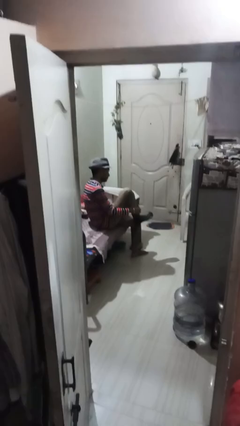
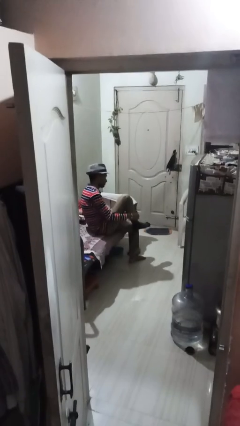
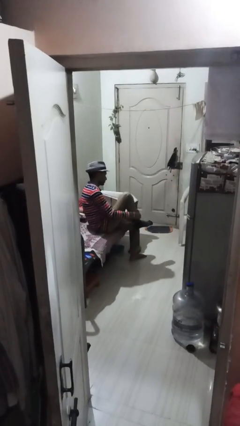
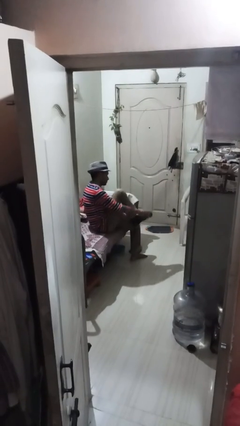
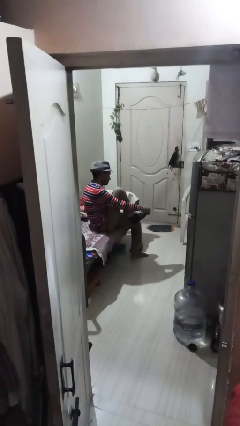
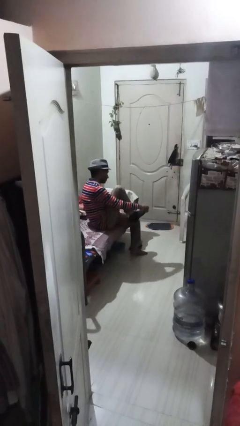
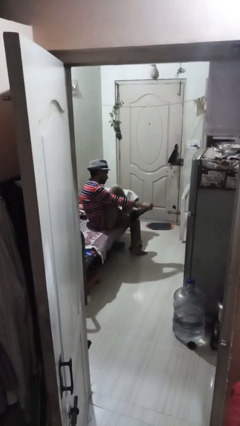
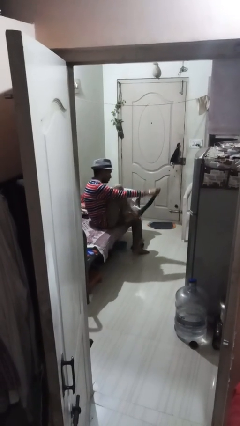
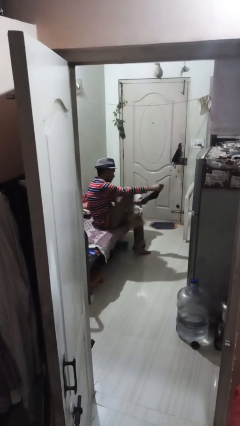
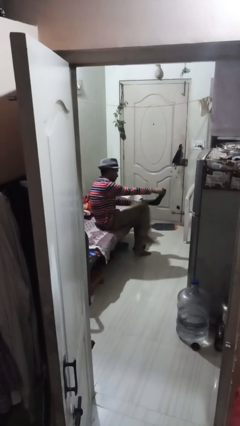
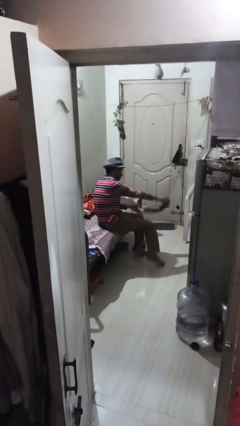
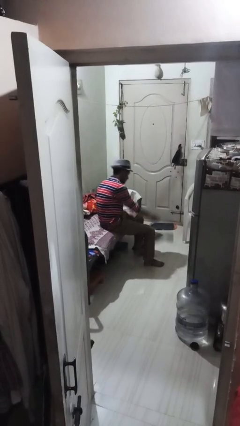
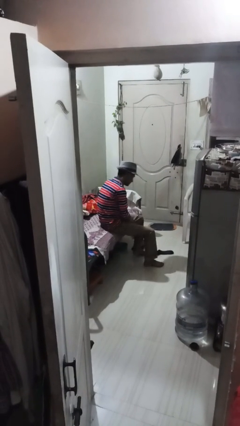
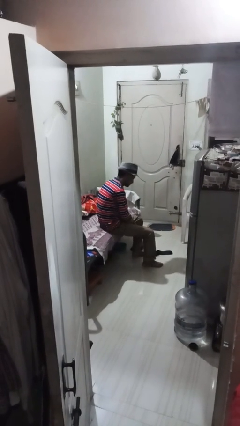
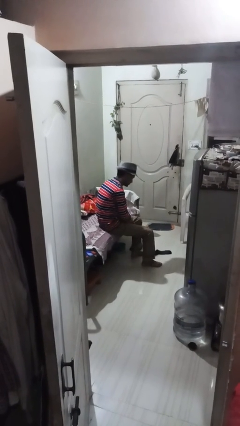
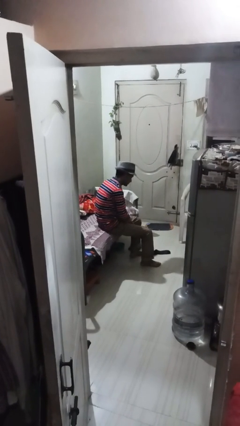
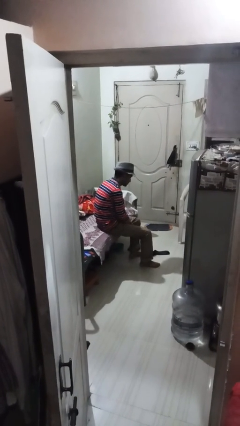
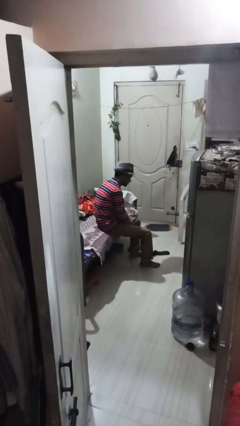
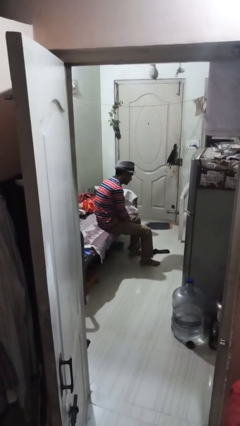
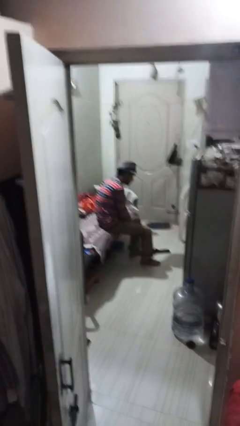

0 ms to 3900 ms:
person takes off socks

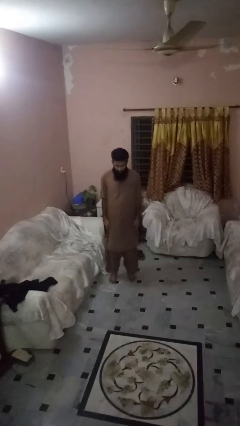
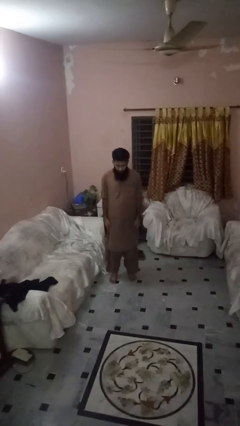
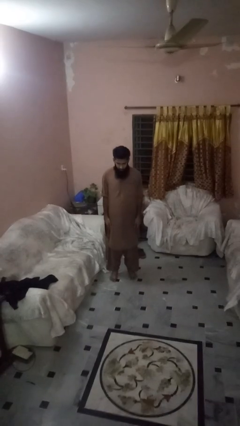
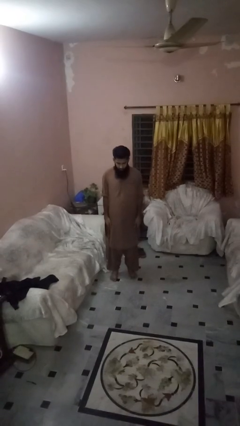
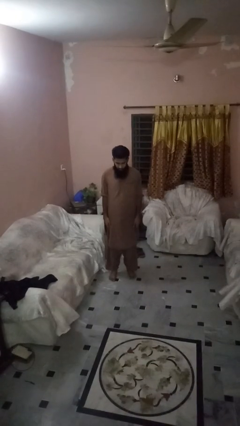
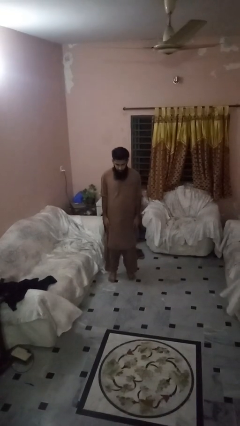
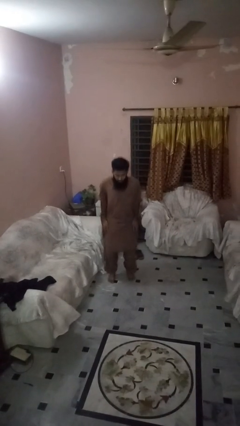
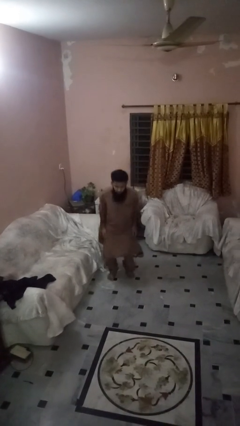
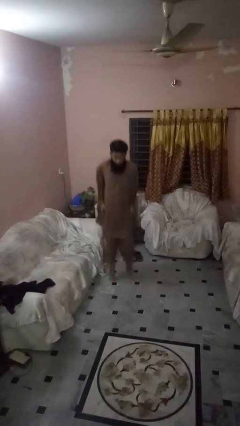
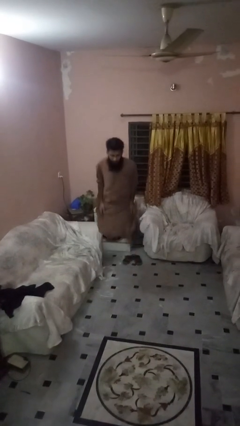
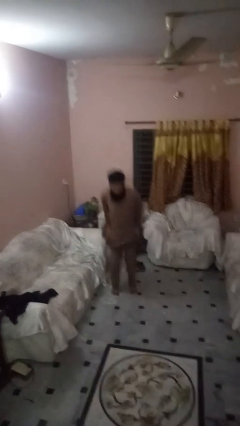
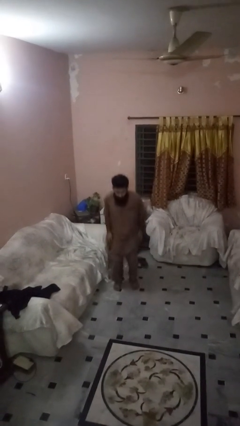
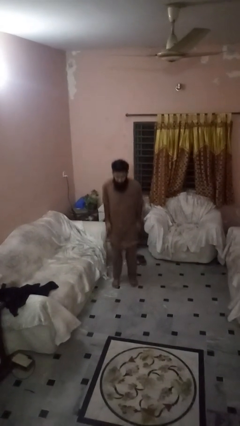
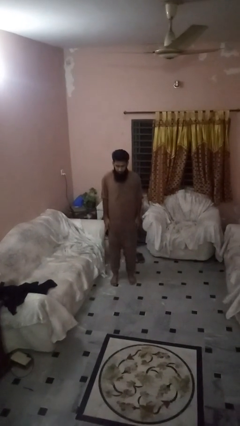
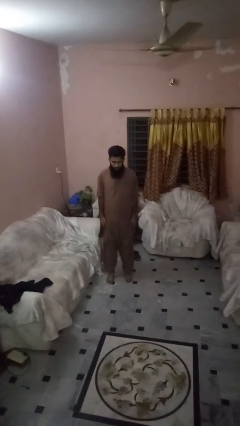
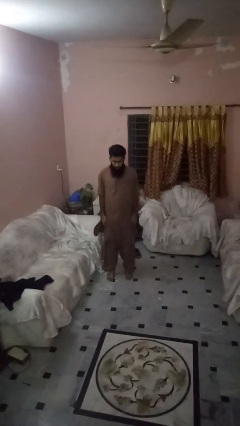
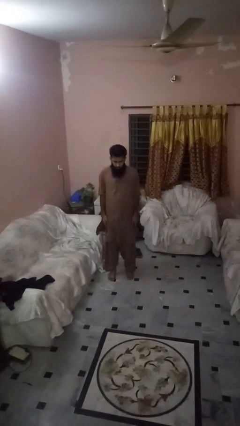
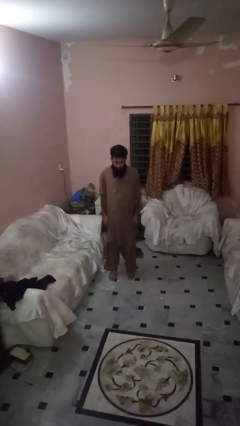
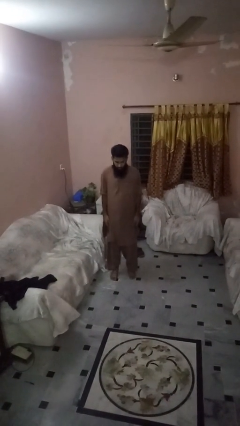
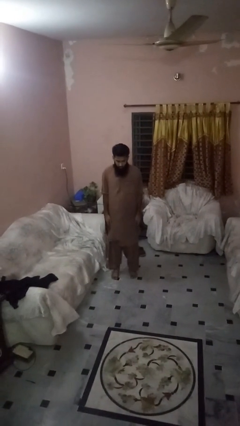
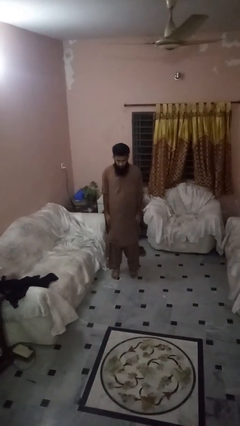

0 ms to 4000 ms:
person jumps

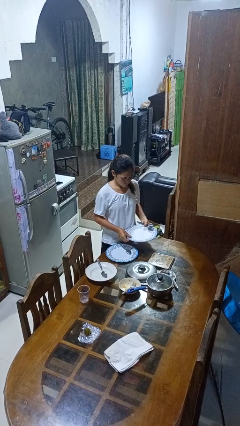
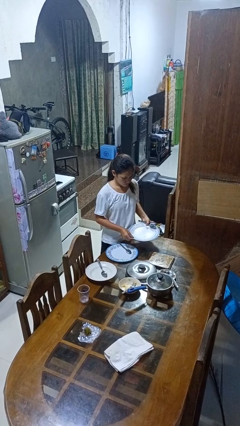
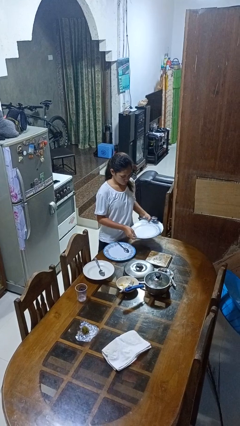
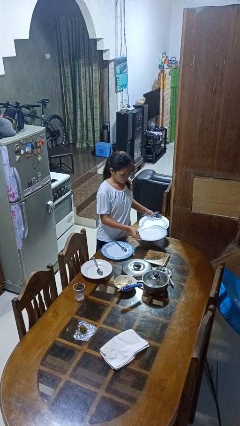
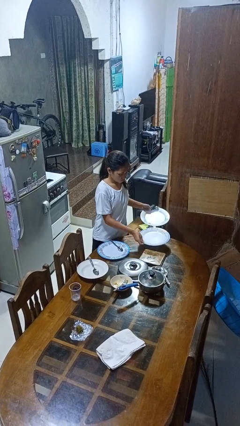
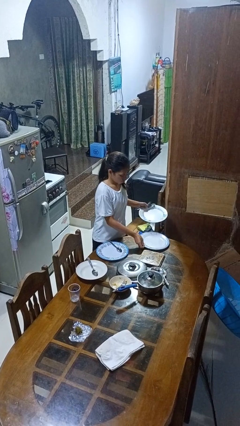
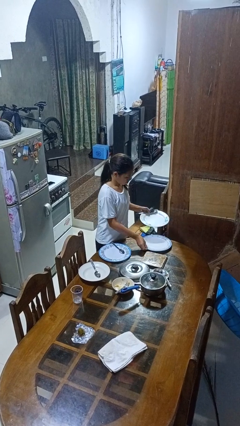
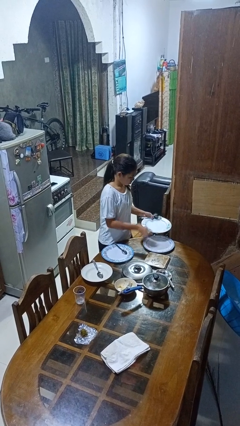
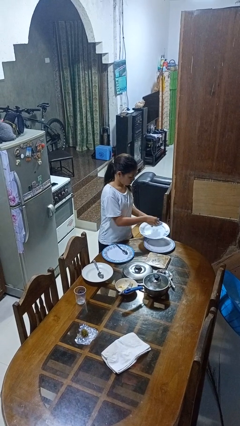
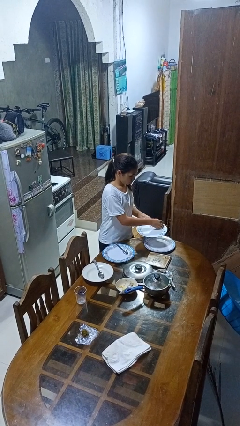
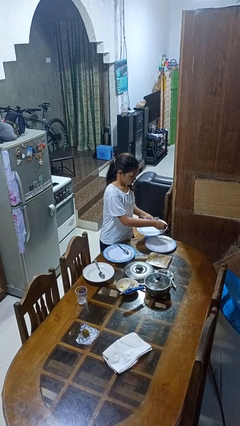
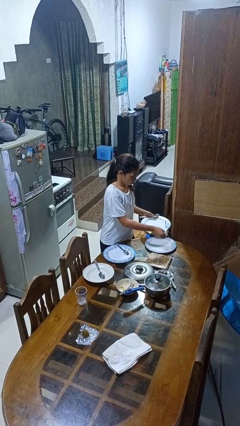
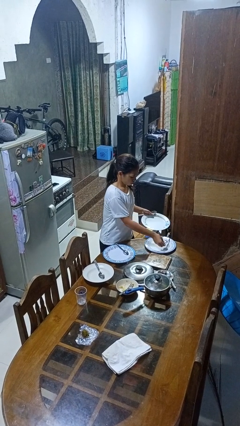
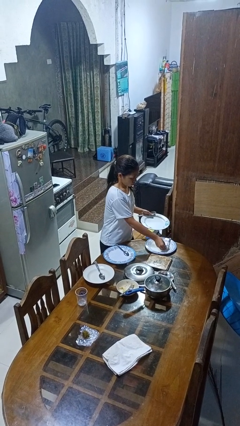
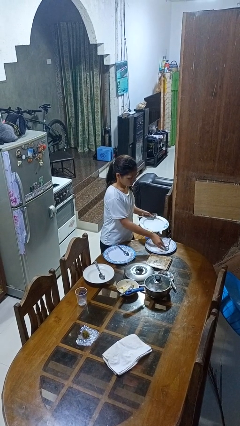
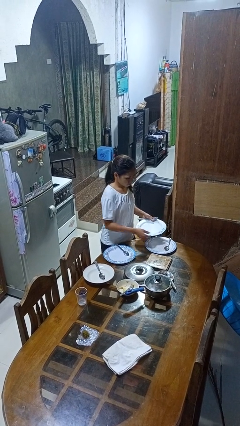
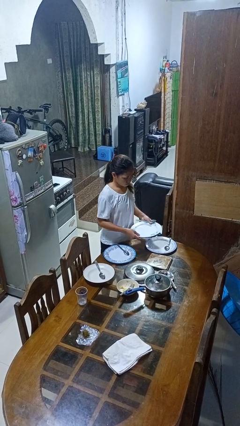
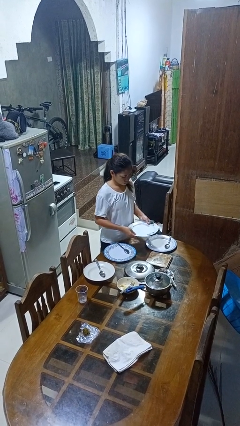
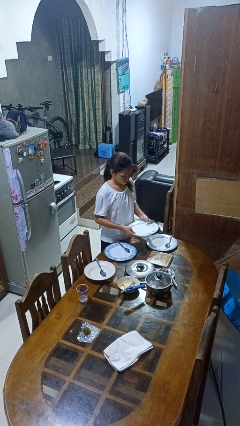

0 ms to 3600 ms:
person sets table

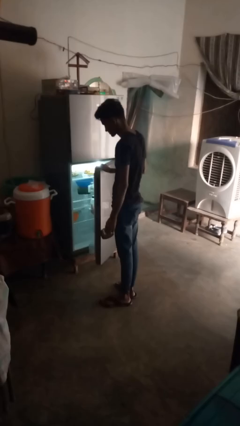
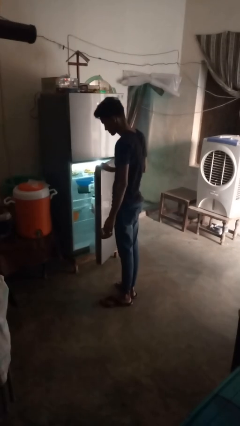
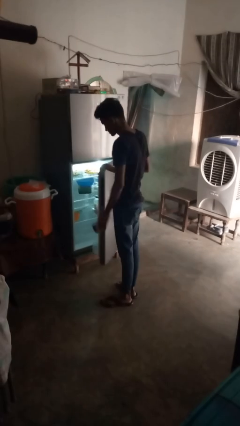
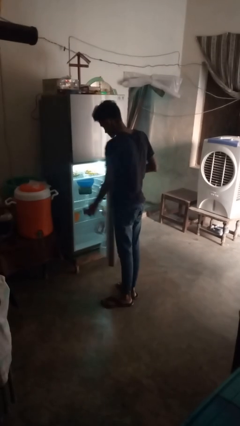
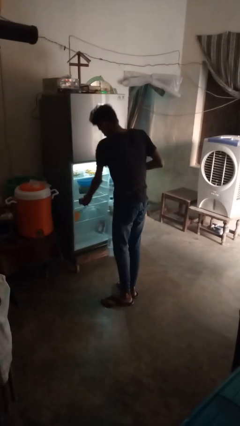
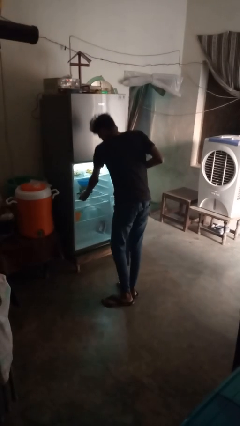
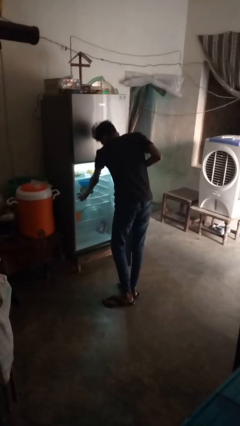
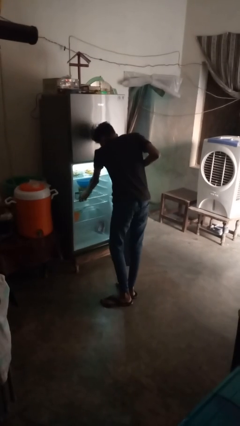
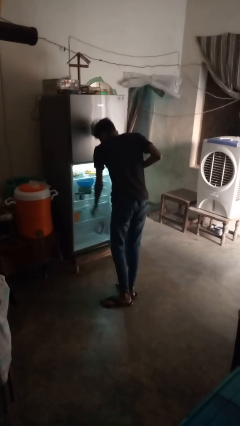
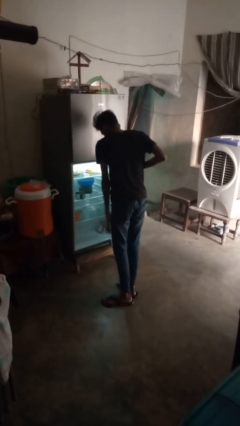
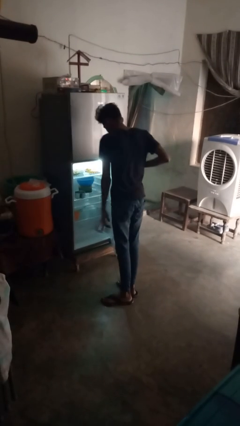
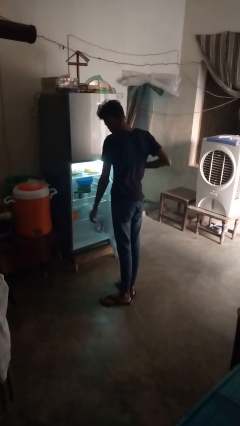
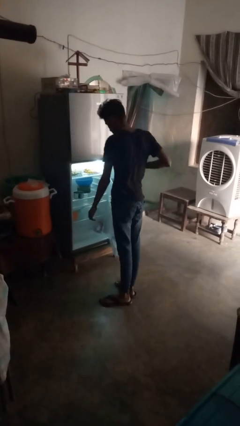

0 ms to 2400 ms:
person puts object into refrigerator

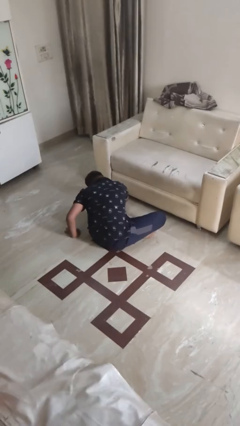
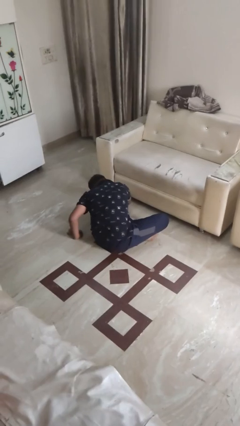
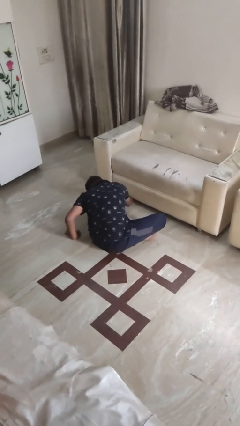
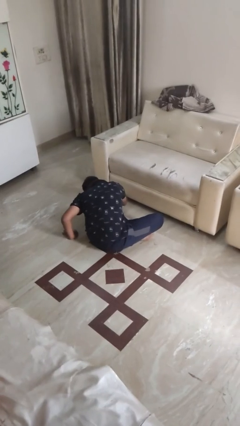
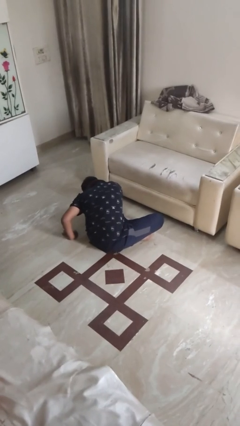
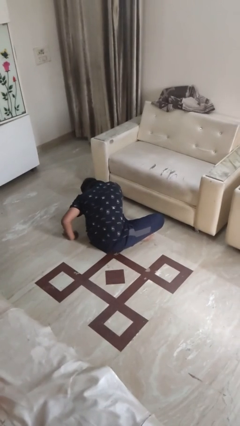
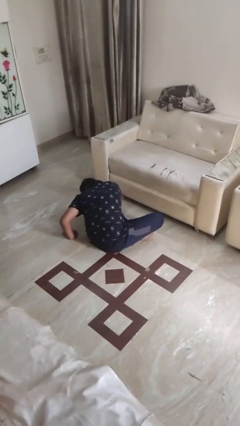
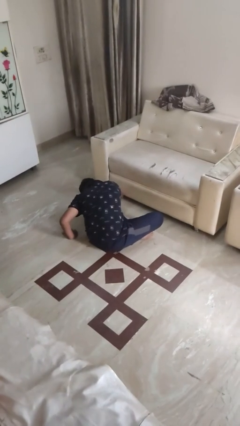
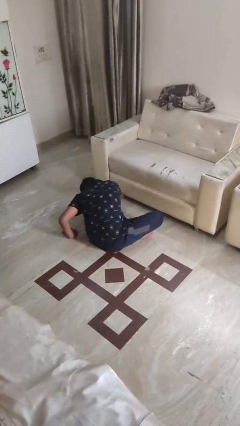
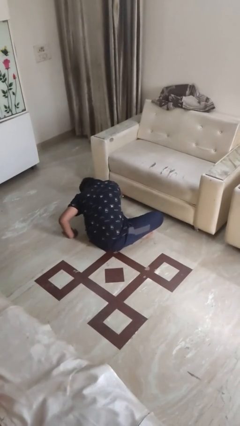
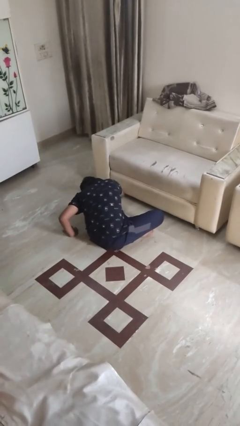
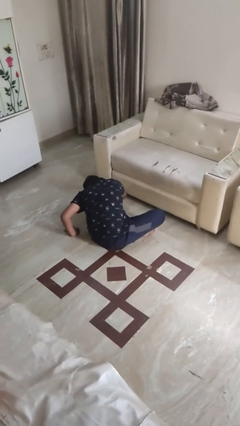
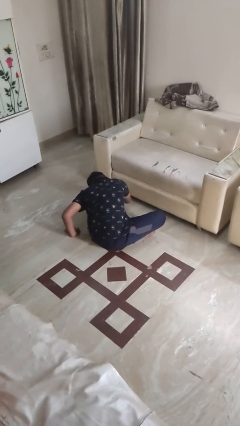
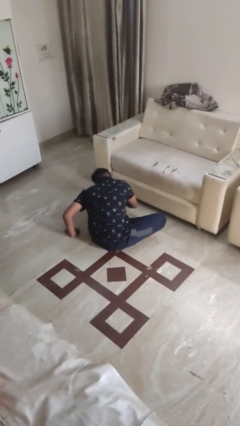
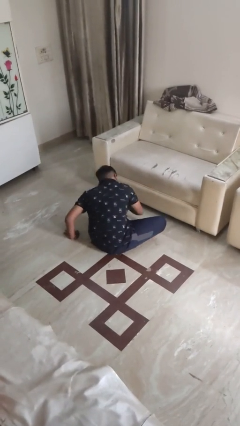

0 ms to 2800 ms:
person searches under couch

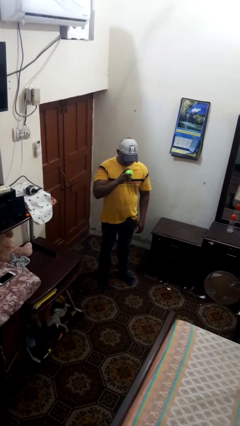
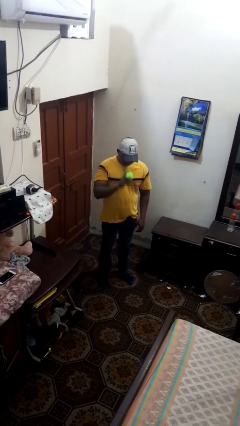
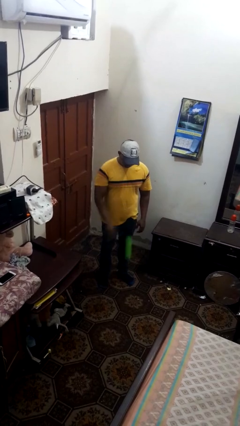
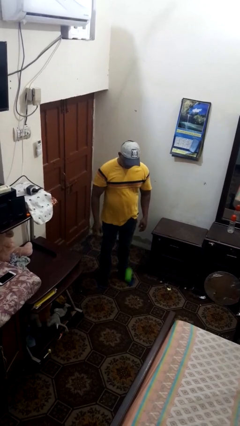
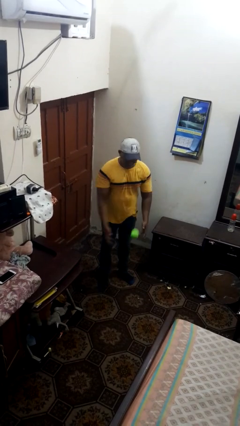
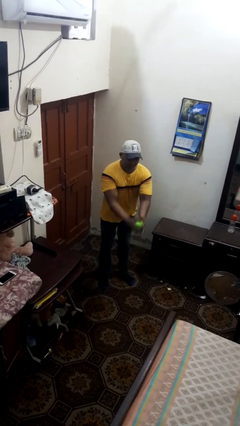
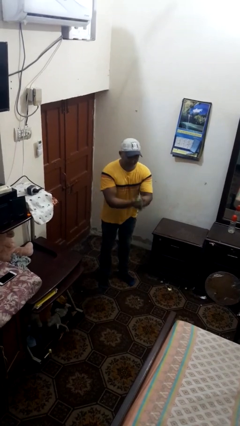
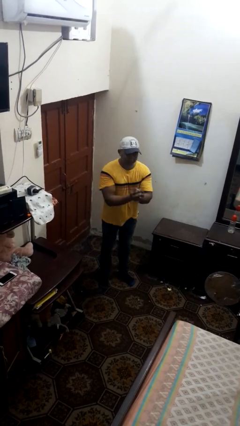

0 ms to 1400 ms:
person bounces ball on floor
